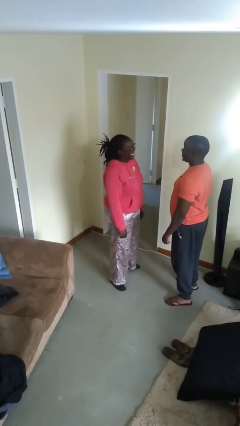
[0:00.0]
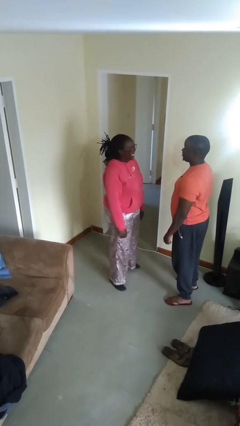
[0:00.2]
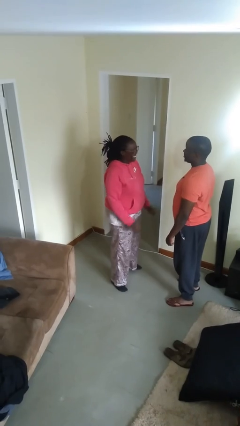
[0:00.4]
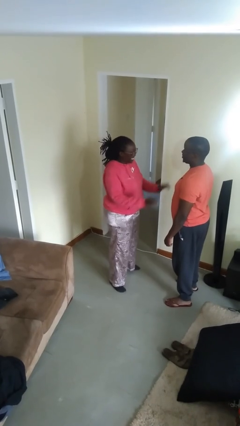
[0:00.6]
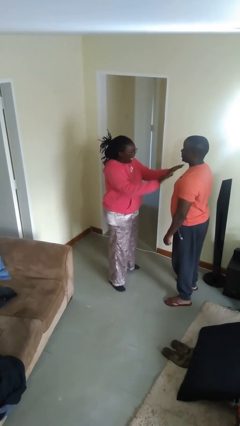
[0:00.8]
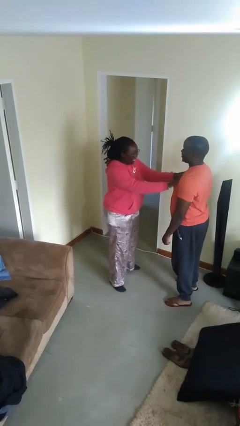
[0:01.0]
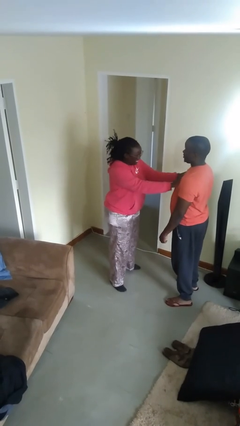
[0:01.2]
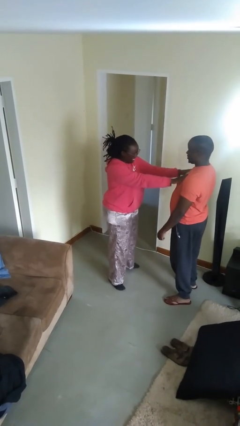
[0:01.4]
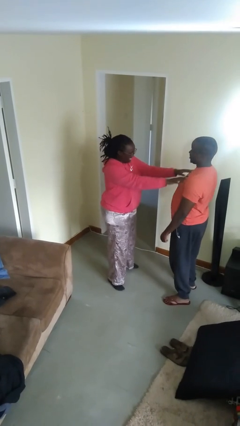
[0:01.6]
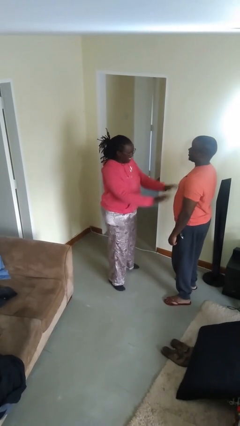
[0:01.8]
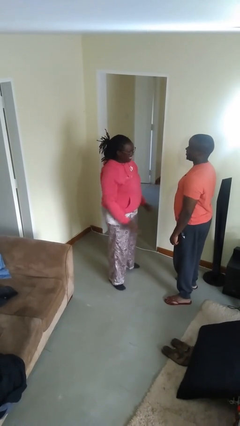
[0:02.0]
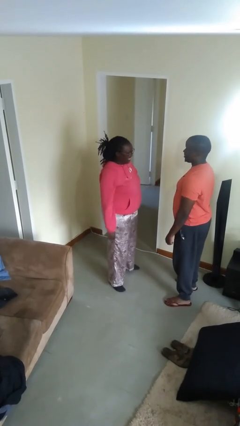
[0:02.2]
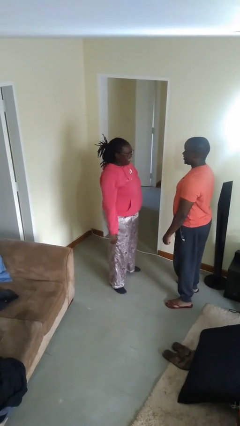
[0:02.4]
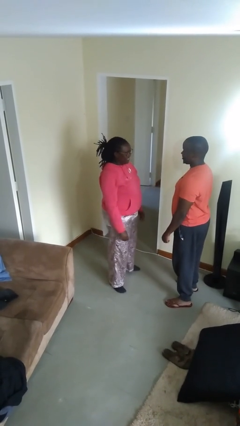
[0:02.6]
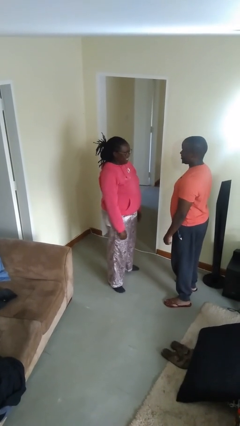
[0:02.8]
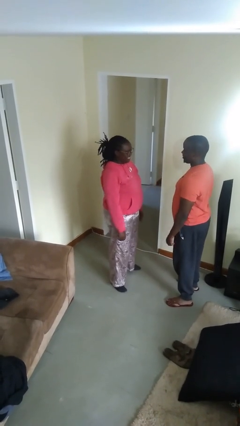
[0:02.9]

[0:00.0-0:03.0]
person shoves person

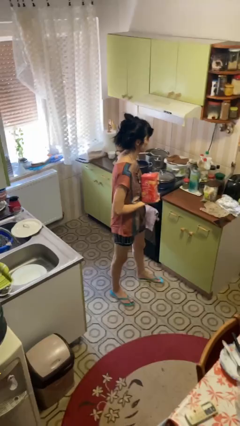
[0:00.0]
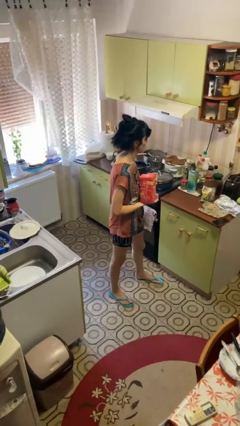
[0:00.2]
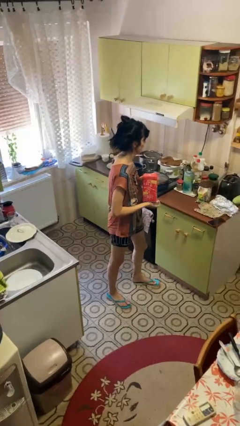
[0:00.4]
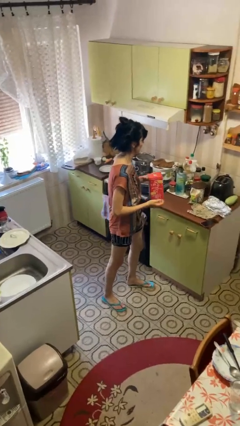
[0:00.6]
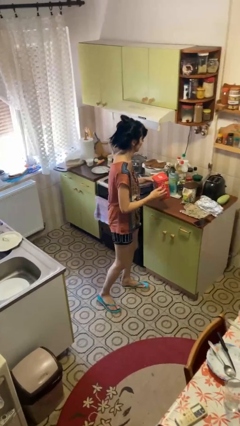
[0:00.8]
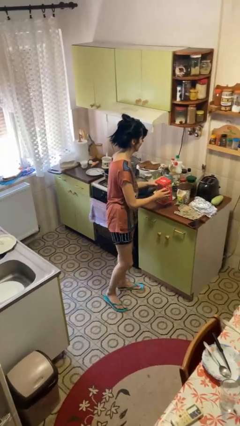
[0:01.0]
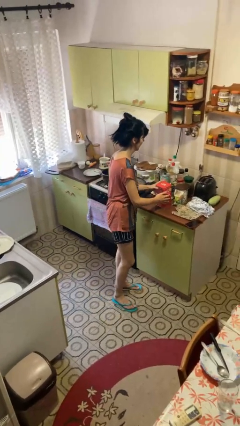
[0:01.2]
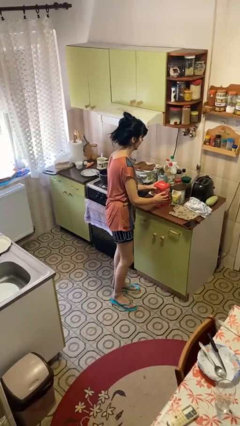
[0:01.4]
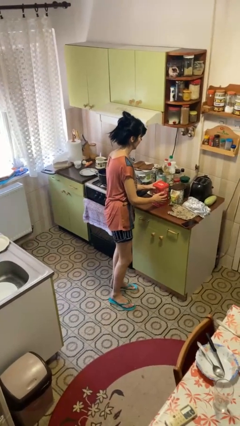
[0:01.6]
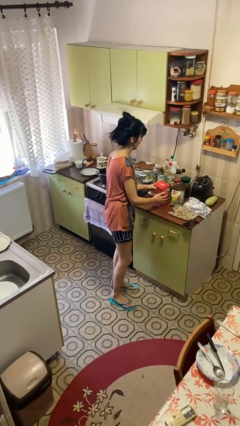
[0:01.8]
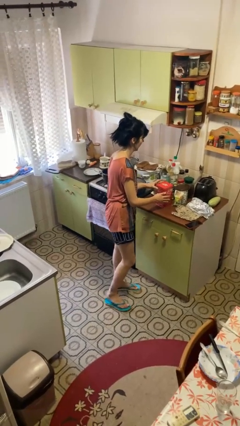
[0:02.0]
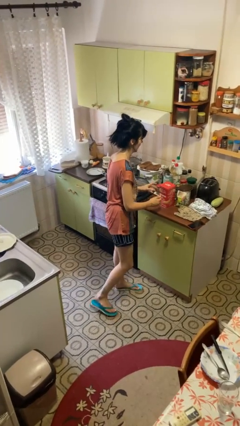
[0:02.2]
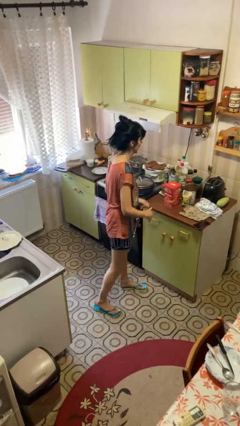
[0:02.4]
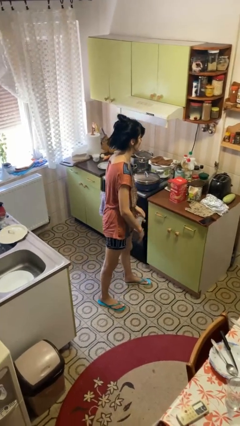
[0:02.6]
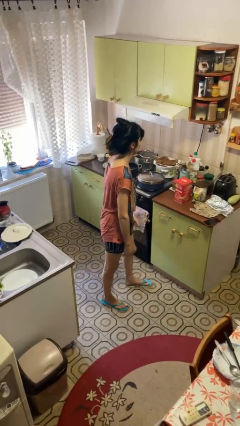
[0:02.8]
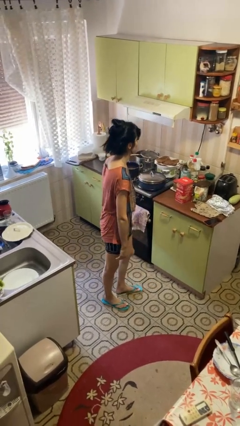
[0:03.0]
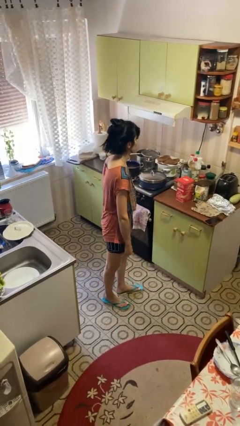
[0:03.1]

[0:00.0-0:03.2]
person puts down object on countertop

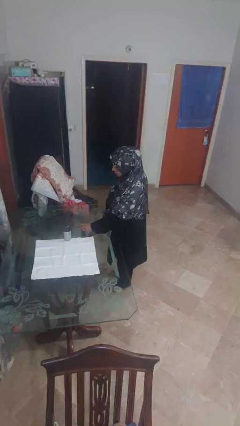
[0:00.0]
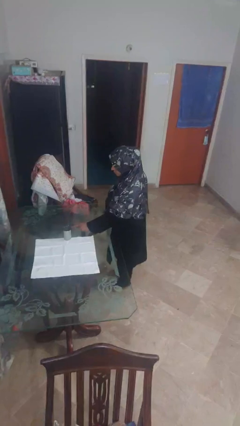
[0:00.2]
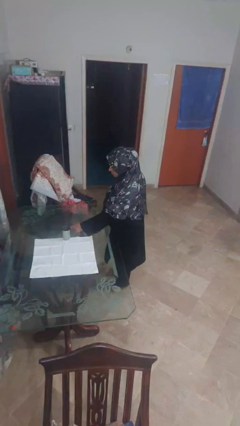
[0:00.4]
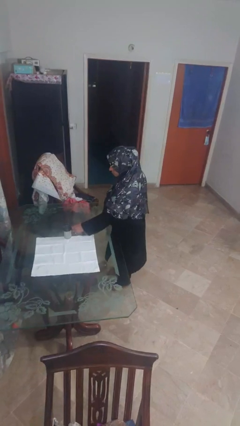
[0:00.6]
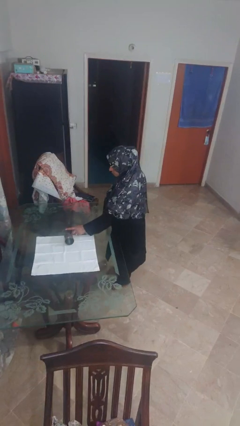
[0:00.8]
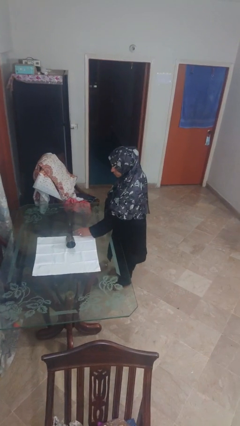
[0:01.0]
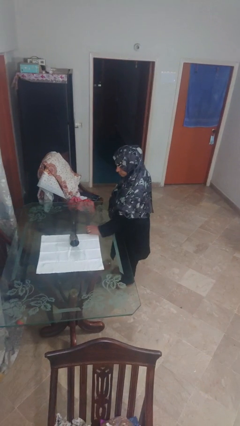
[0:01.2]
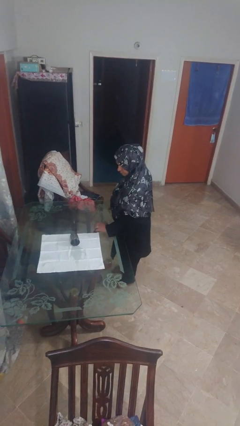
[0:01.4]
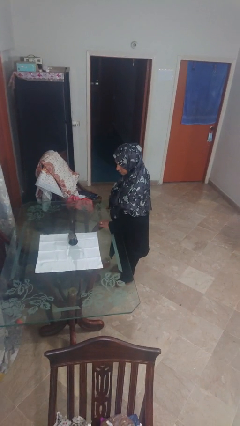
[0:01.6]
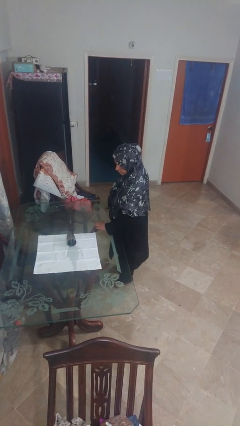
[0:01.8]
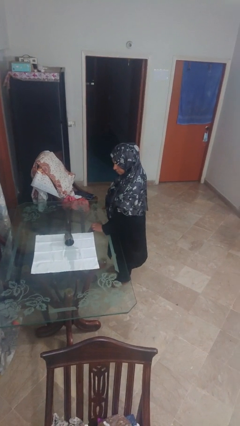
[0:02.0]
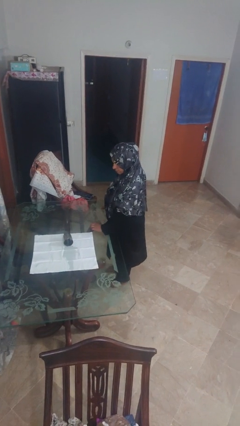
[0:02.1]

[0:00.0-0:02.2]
person spills on table

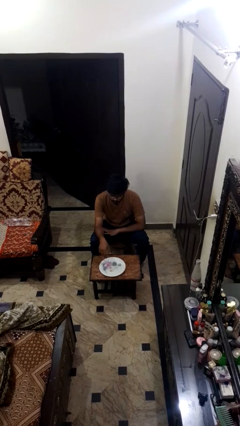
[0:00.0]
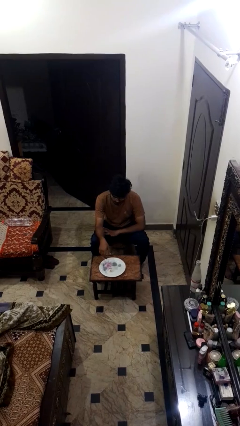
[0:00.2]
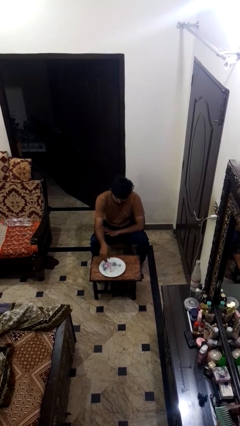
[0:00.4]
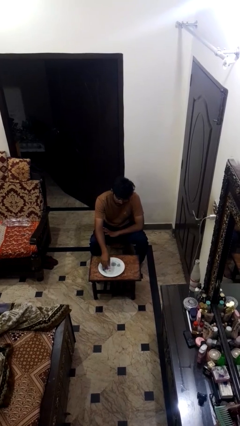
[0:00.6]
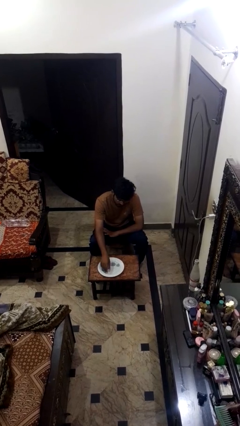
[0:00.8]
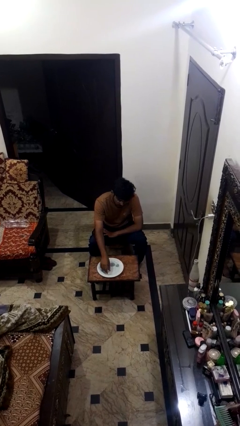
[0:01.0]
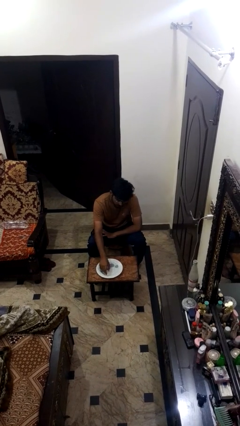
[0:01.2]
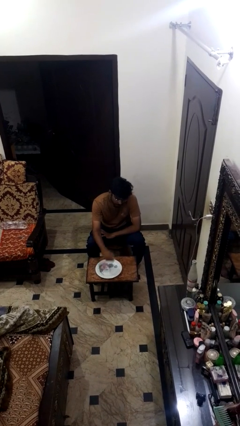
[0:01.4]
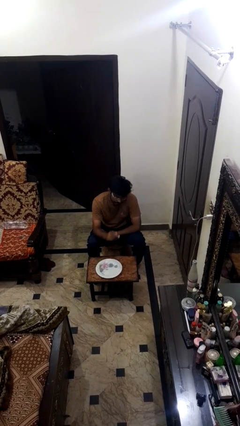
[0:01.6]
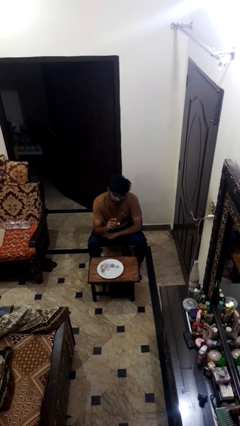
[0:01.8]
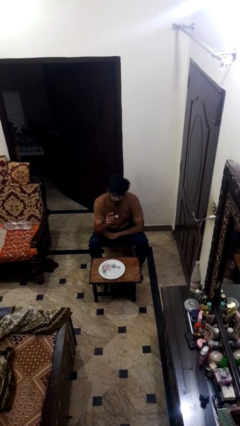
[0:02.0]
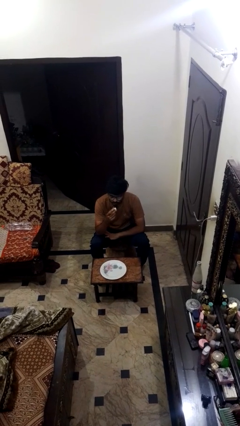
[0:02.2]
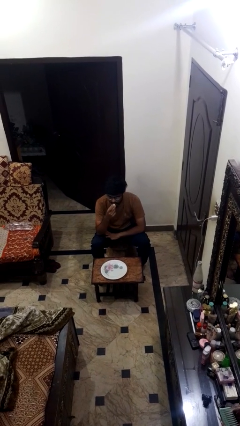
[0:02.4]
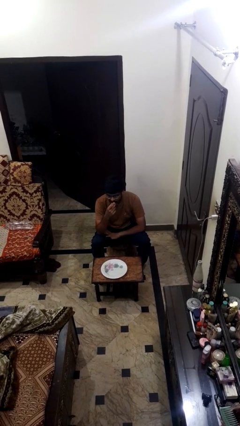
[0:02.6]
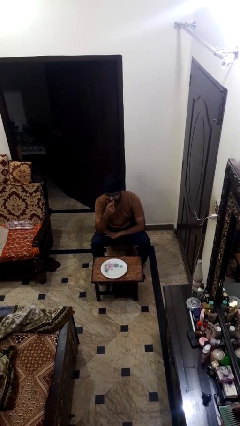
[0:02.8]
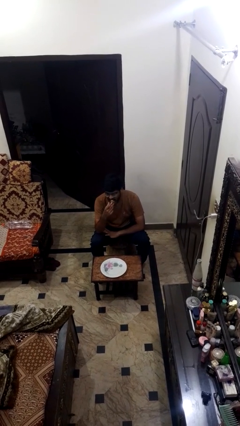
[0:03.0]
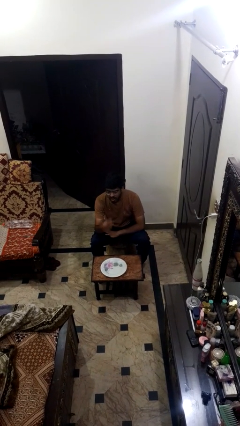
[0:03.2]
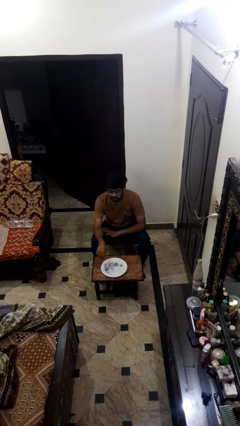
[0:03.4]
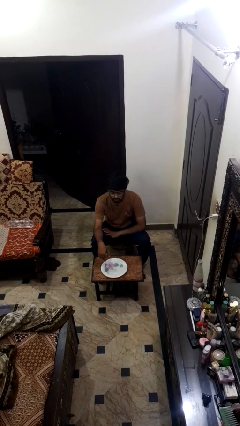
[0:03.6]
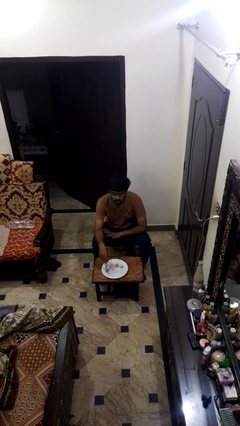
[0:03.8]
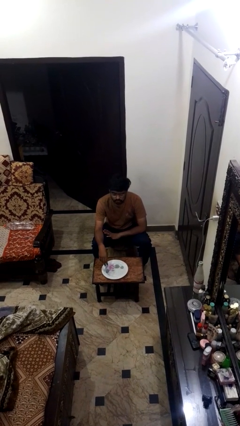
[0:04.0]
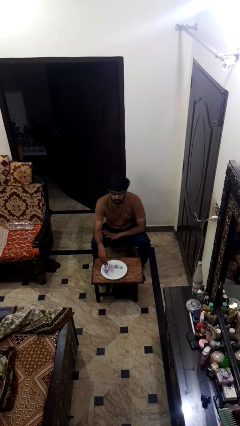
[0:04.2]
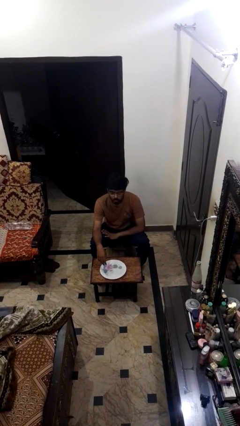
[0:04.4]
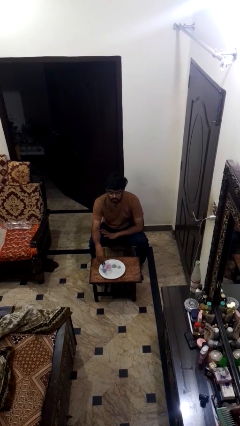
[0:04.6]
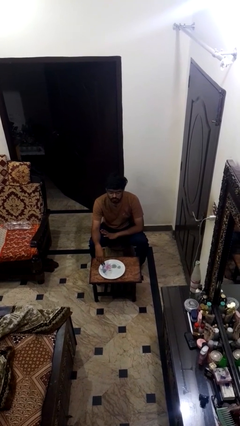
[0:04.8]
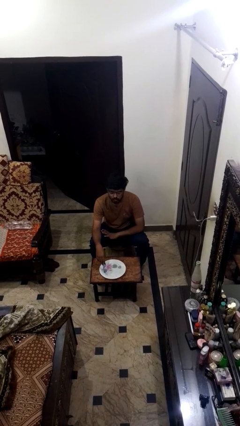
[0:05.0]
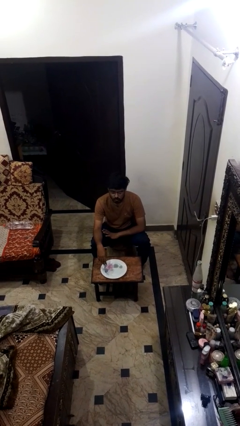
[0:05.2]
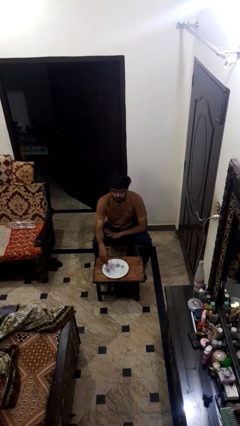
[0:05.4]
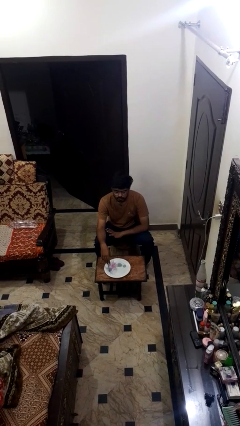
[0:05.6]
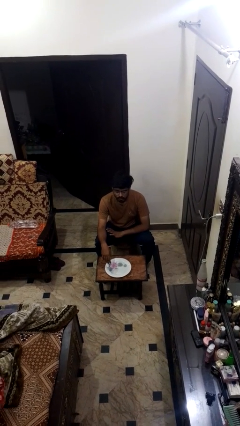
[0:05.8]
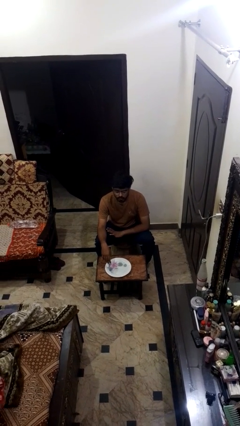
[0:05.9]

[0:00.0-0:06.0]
person eats with hands

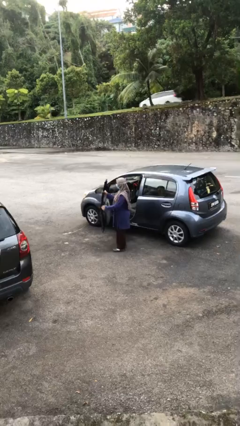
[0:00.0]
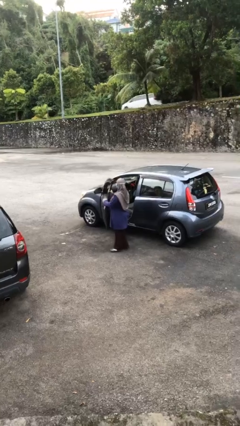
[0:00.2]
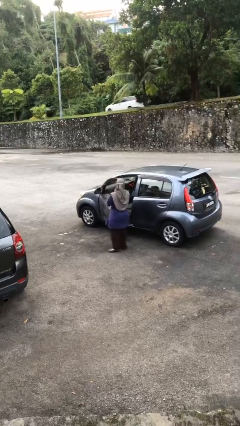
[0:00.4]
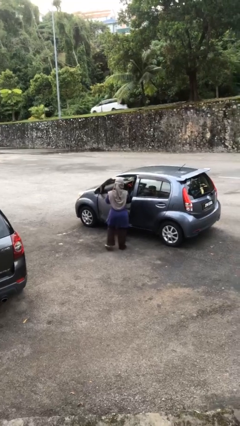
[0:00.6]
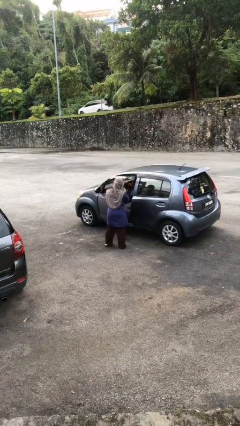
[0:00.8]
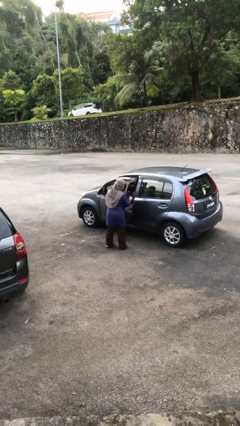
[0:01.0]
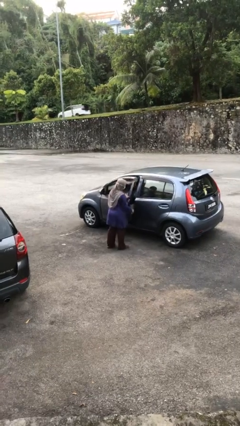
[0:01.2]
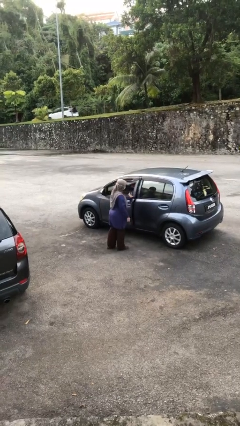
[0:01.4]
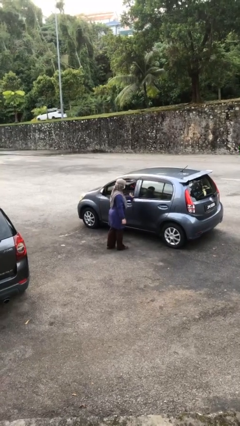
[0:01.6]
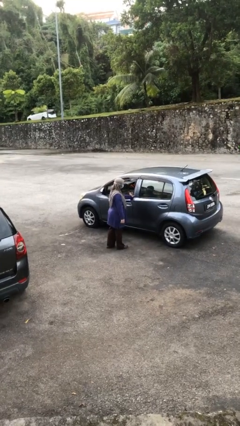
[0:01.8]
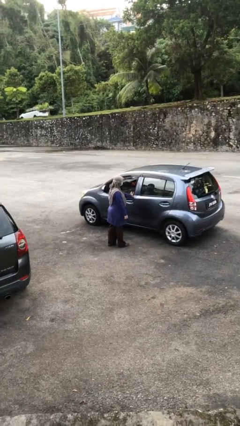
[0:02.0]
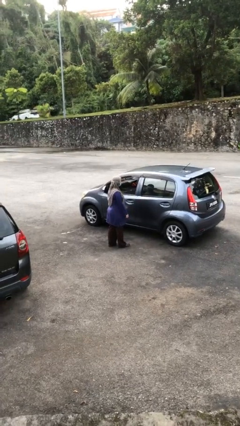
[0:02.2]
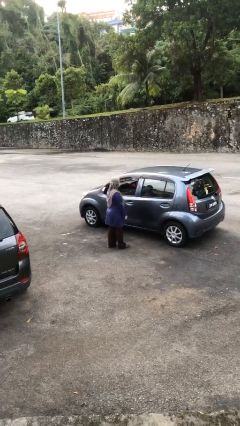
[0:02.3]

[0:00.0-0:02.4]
person closes car door

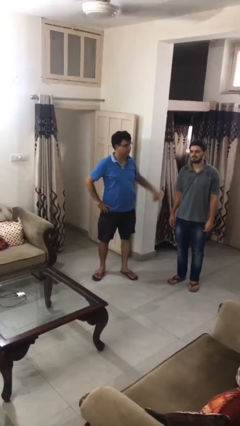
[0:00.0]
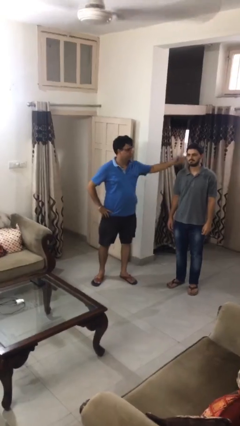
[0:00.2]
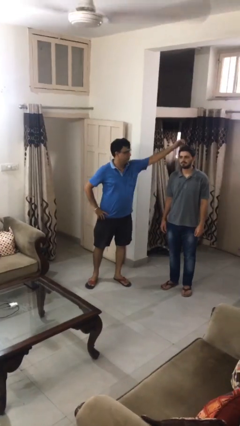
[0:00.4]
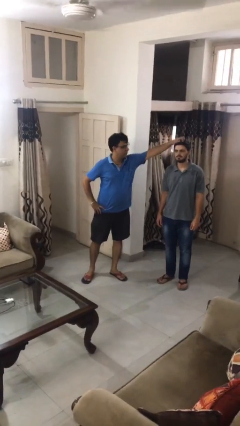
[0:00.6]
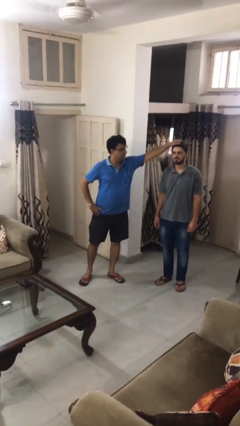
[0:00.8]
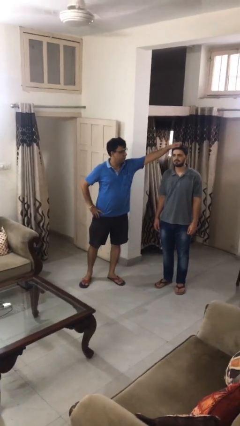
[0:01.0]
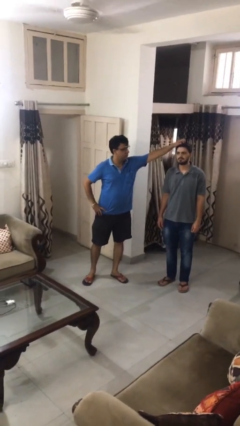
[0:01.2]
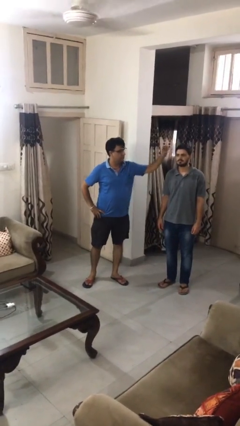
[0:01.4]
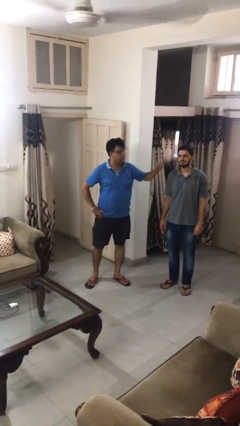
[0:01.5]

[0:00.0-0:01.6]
person grabs person by hair
